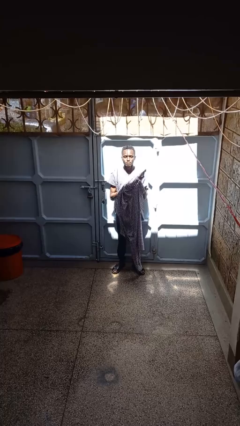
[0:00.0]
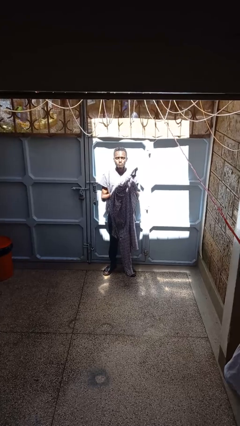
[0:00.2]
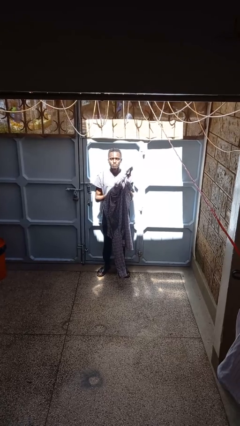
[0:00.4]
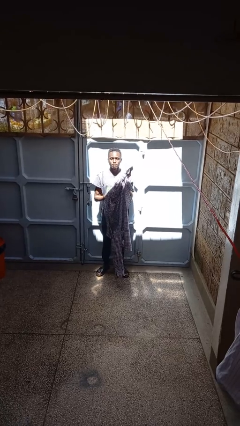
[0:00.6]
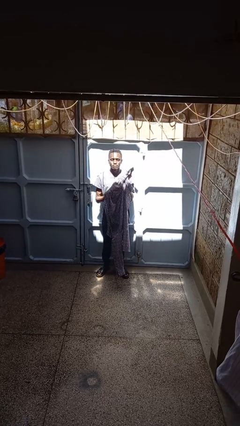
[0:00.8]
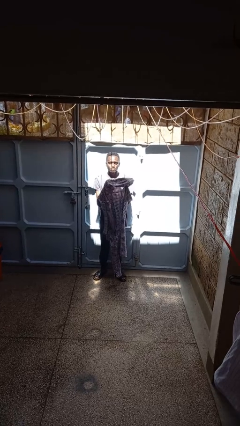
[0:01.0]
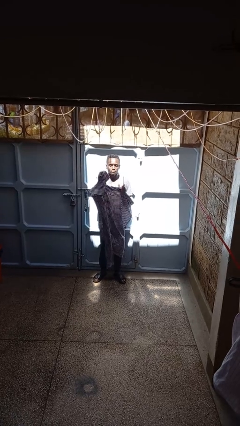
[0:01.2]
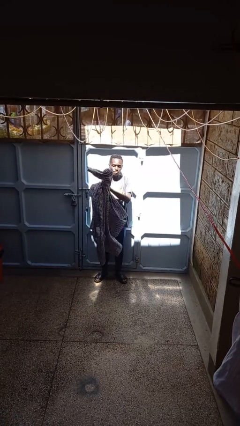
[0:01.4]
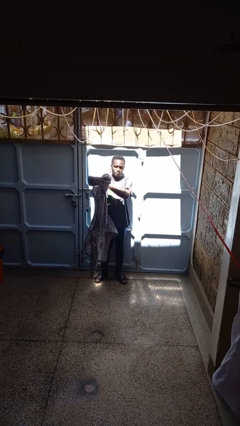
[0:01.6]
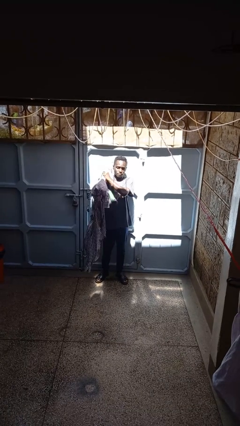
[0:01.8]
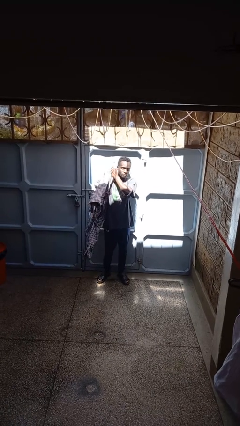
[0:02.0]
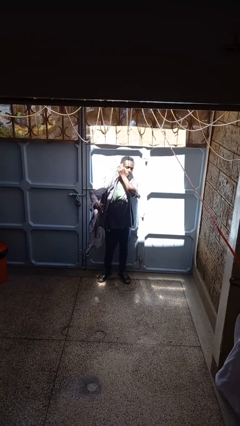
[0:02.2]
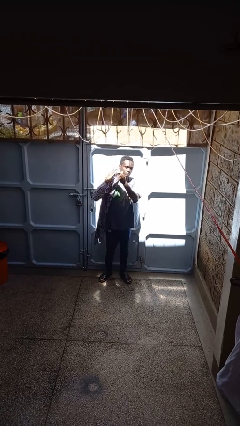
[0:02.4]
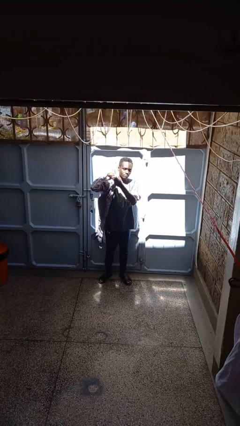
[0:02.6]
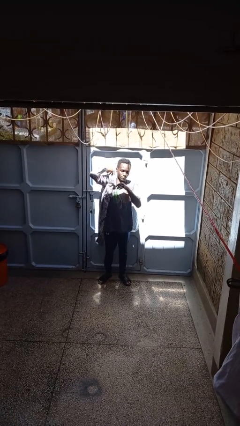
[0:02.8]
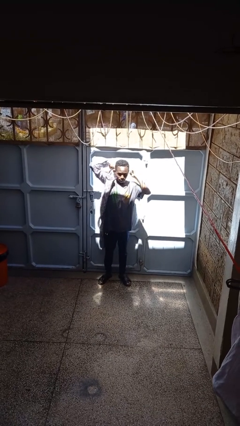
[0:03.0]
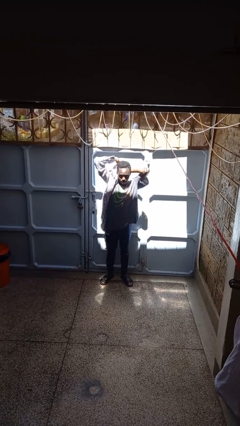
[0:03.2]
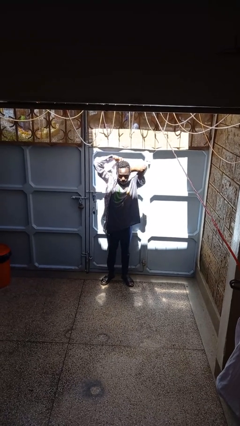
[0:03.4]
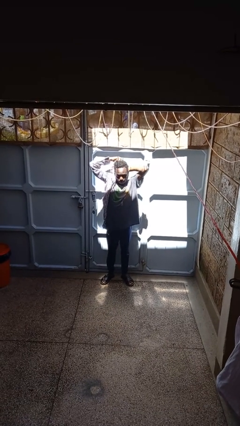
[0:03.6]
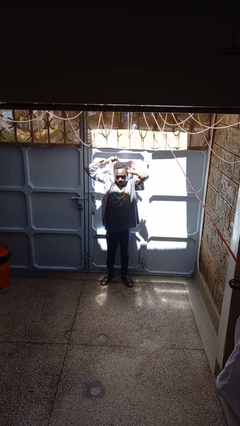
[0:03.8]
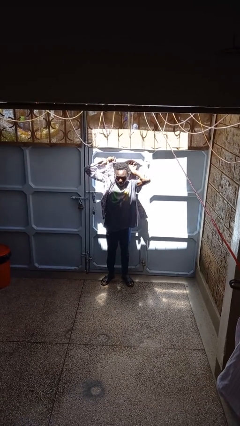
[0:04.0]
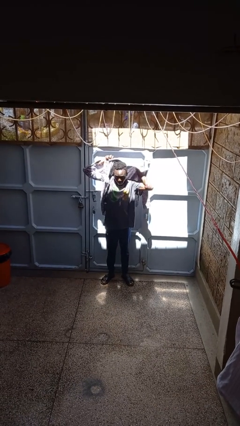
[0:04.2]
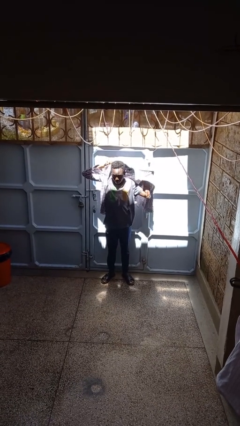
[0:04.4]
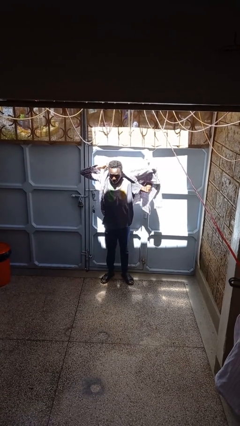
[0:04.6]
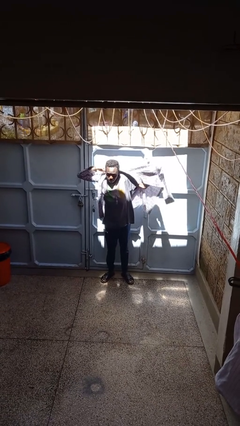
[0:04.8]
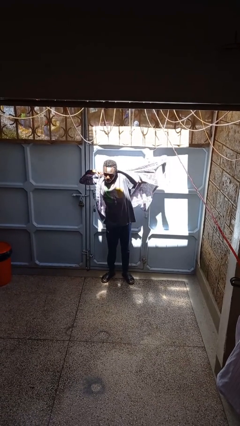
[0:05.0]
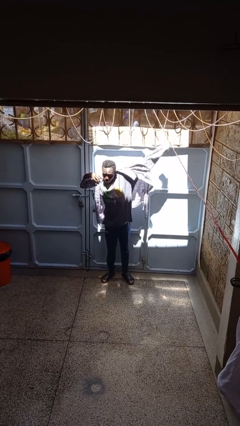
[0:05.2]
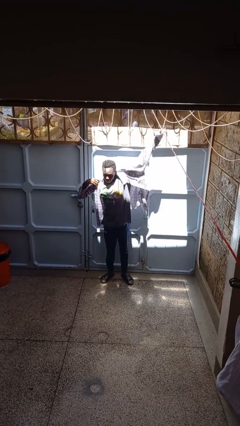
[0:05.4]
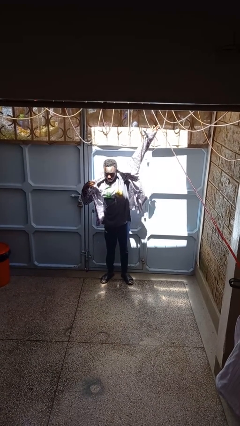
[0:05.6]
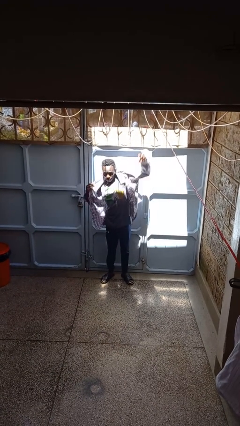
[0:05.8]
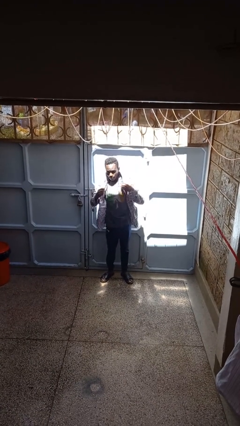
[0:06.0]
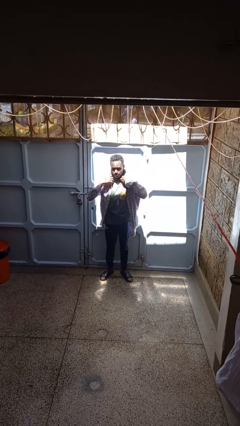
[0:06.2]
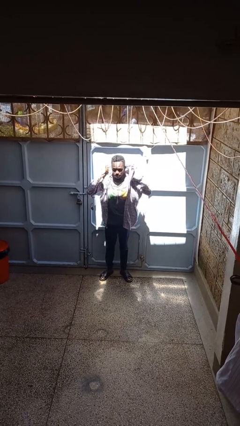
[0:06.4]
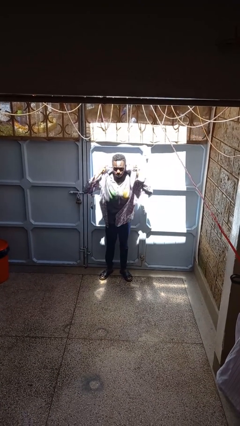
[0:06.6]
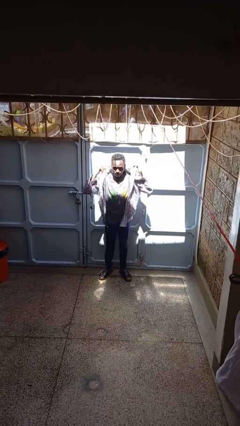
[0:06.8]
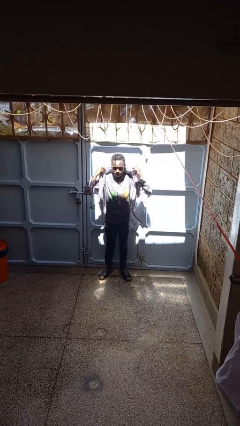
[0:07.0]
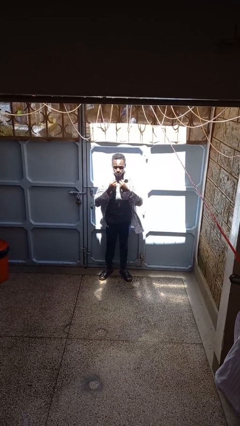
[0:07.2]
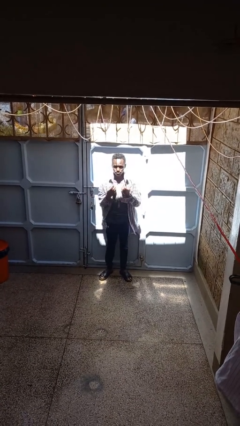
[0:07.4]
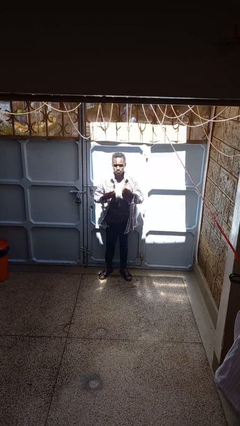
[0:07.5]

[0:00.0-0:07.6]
person puts on shirt

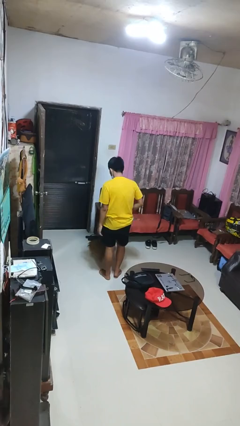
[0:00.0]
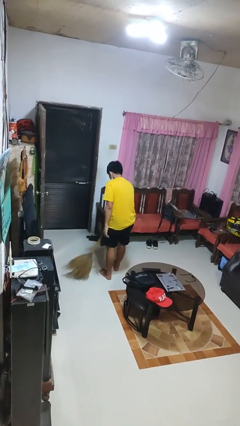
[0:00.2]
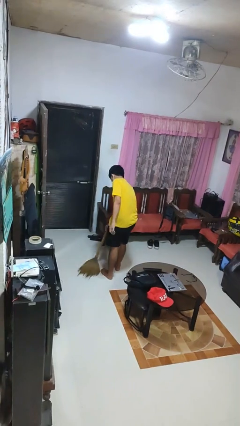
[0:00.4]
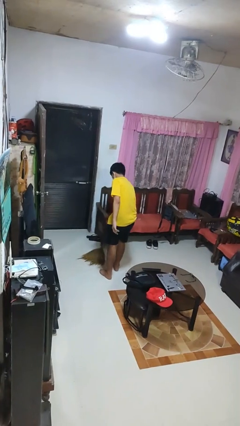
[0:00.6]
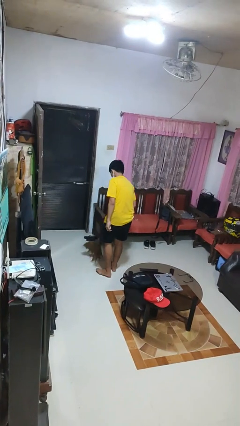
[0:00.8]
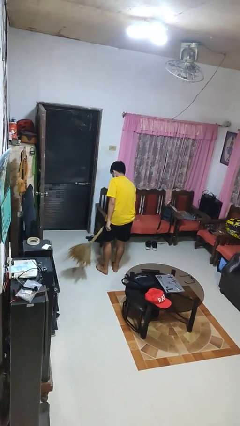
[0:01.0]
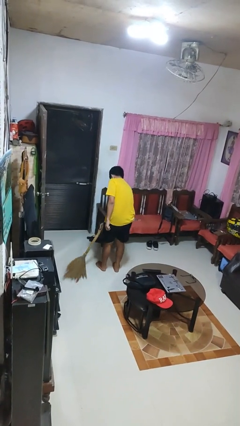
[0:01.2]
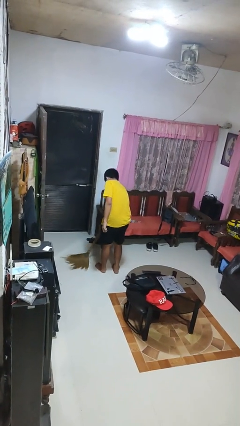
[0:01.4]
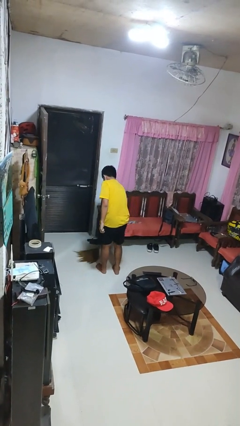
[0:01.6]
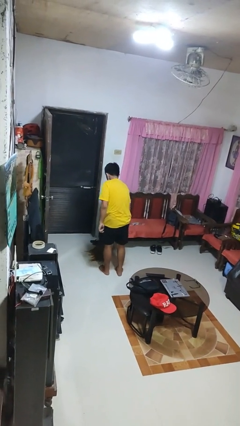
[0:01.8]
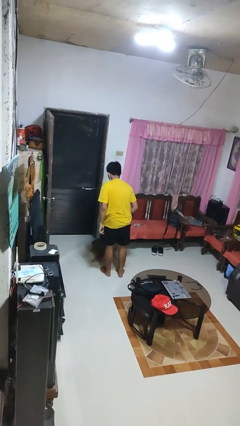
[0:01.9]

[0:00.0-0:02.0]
person sweeps floor

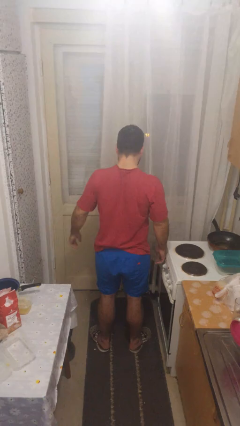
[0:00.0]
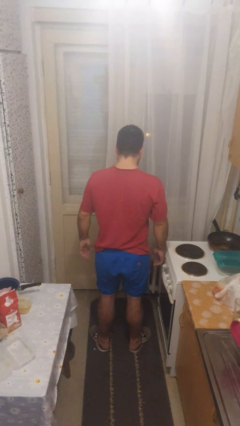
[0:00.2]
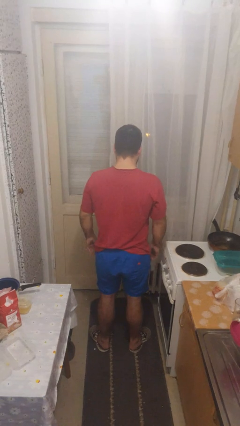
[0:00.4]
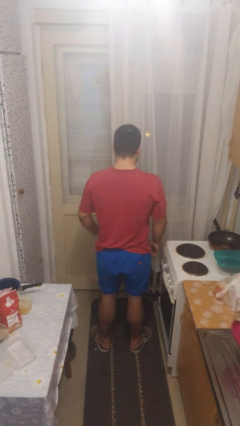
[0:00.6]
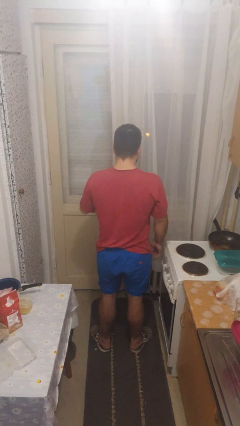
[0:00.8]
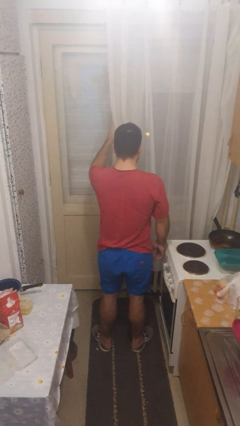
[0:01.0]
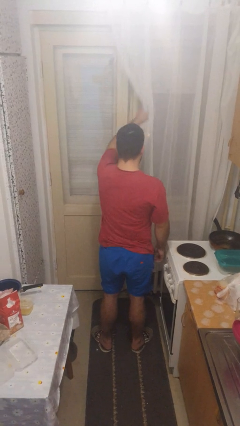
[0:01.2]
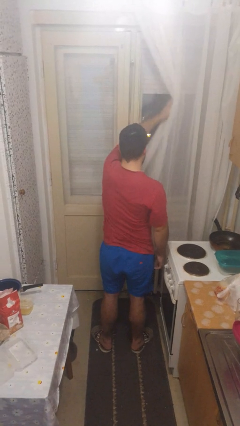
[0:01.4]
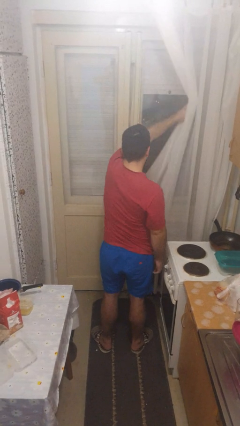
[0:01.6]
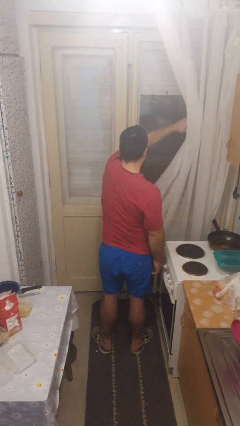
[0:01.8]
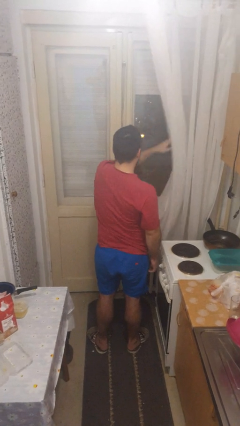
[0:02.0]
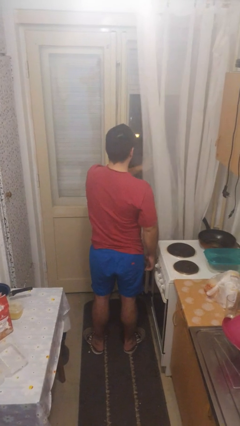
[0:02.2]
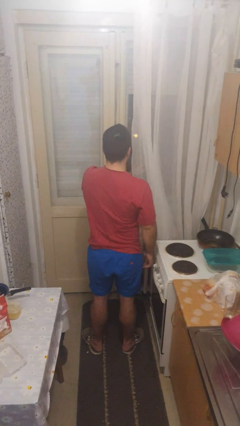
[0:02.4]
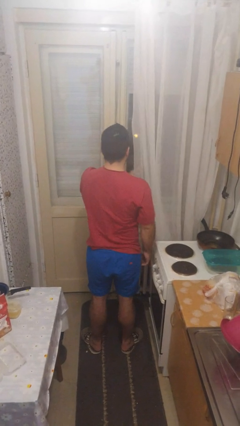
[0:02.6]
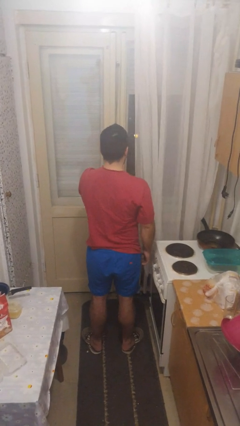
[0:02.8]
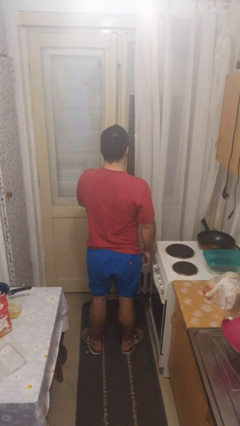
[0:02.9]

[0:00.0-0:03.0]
person opens curtains

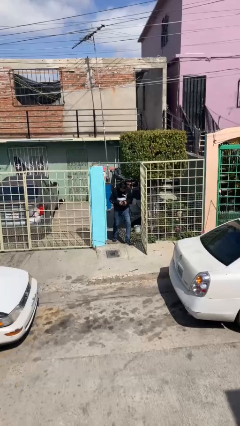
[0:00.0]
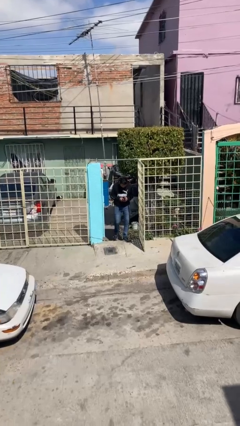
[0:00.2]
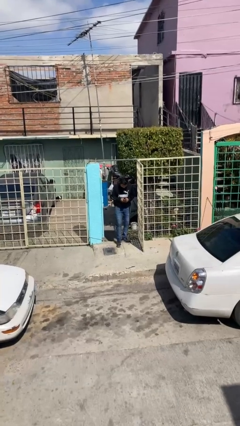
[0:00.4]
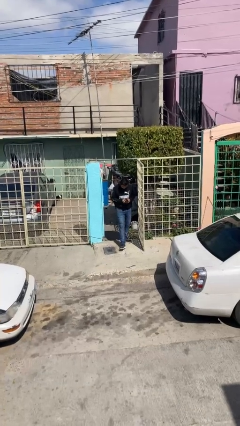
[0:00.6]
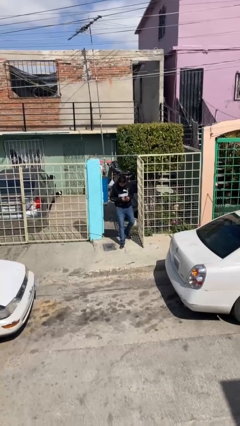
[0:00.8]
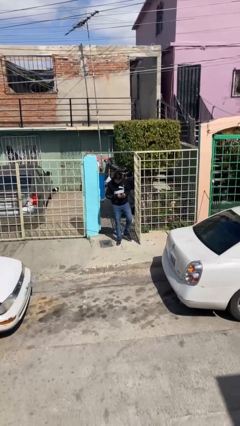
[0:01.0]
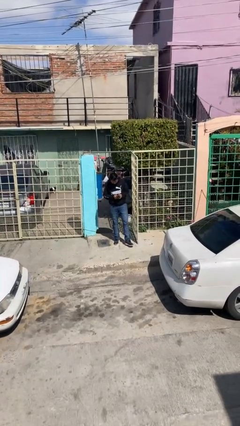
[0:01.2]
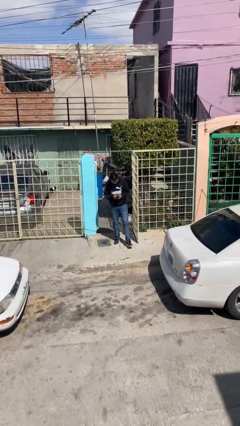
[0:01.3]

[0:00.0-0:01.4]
person enters scene through structure

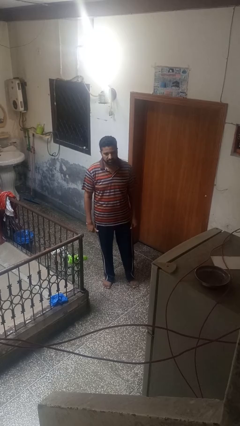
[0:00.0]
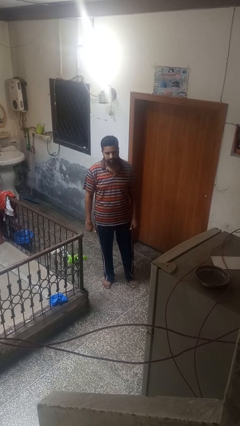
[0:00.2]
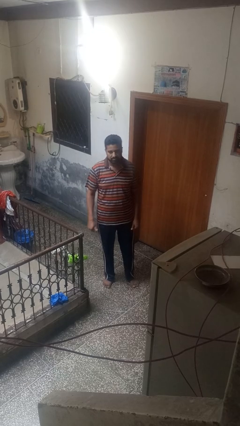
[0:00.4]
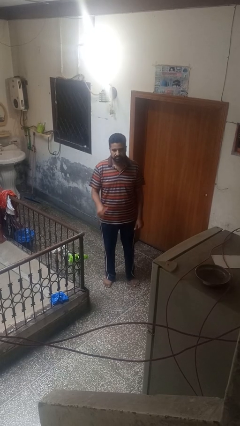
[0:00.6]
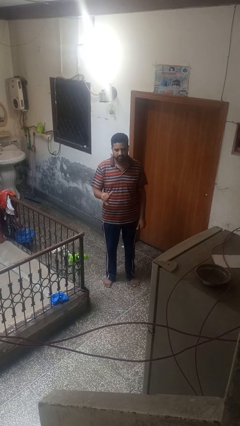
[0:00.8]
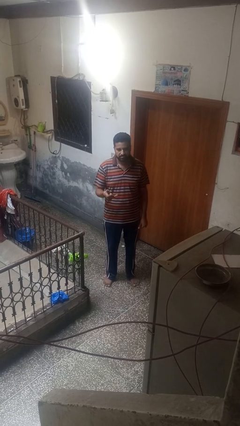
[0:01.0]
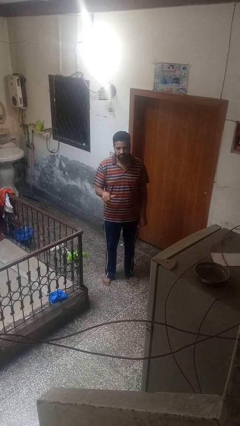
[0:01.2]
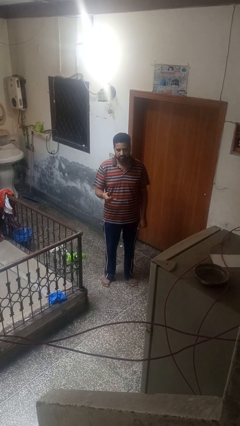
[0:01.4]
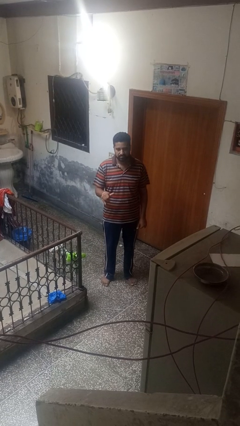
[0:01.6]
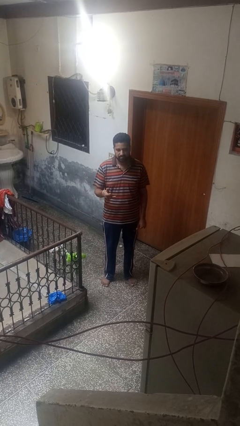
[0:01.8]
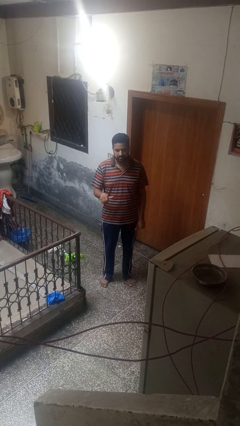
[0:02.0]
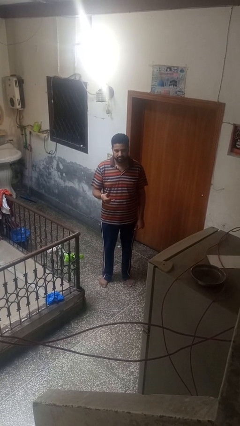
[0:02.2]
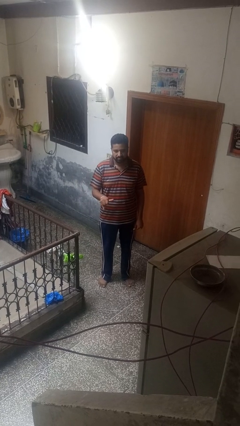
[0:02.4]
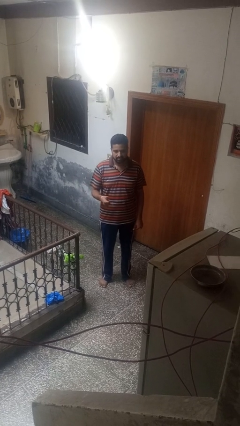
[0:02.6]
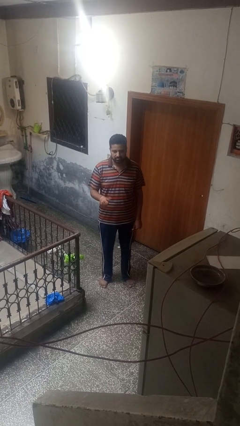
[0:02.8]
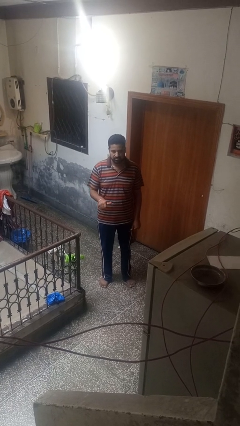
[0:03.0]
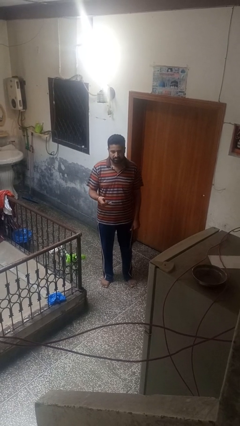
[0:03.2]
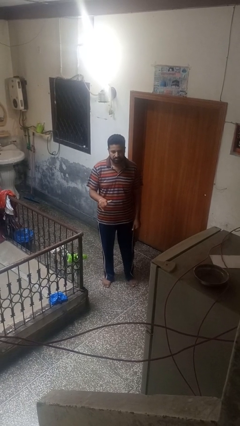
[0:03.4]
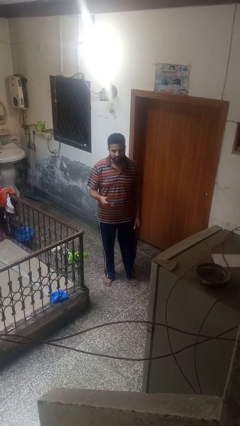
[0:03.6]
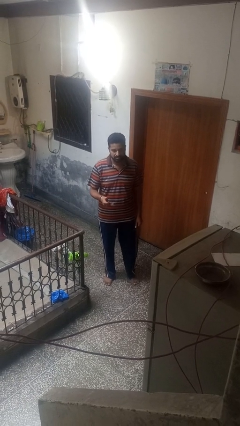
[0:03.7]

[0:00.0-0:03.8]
person gestures hang loose
